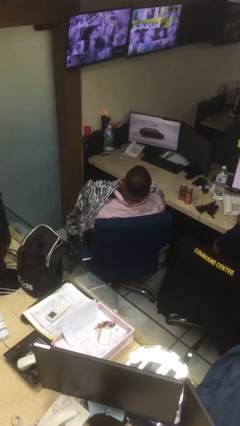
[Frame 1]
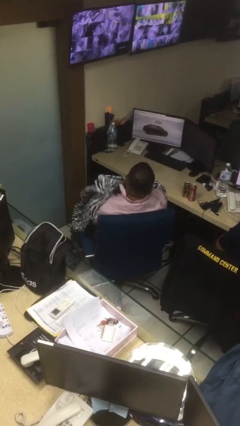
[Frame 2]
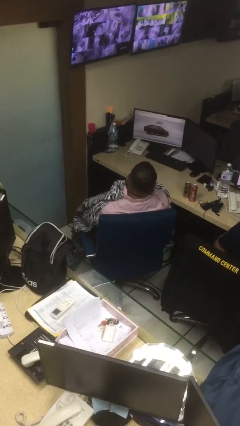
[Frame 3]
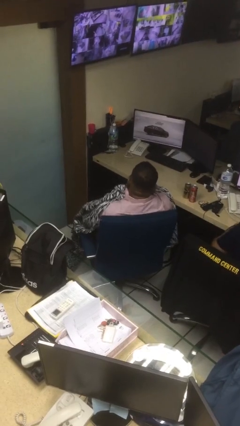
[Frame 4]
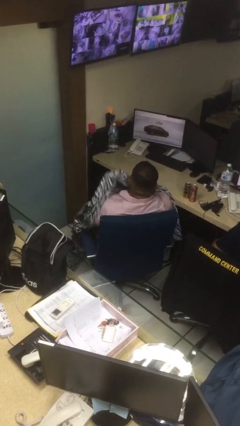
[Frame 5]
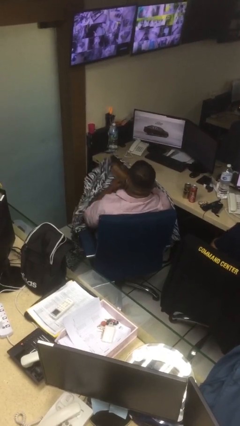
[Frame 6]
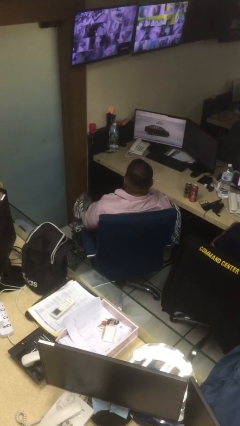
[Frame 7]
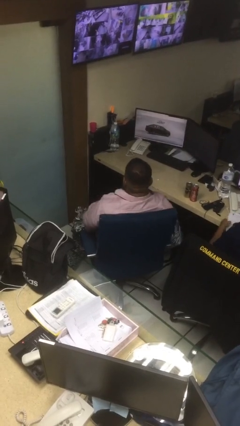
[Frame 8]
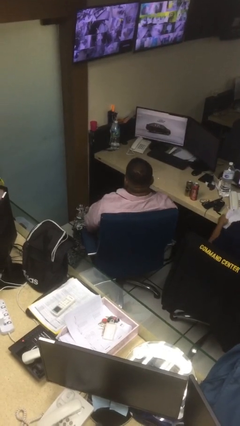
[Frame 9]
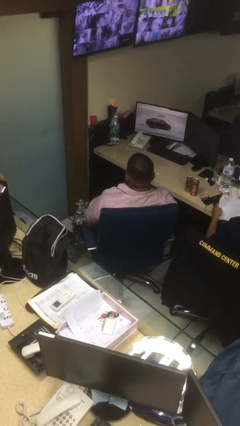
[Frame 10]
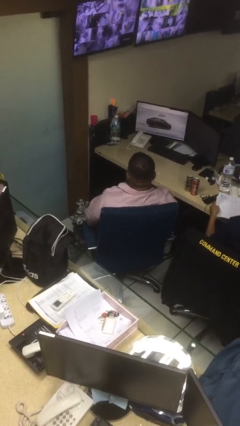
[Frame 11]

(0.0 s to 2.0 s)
person uncovers with blanket

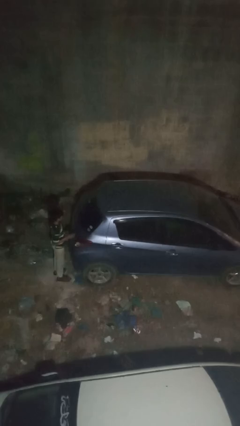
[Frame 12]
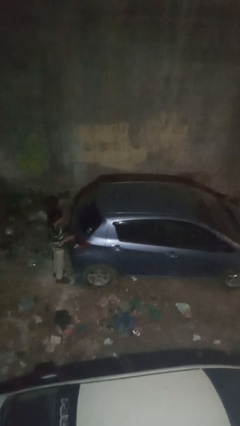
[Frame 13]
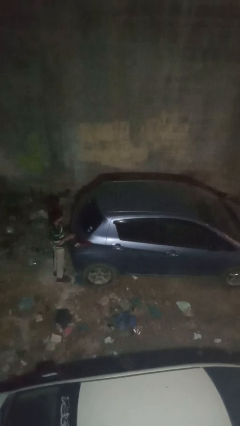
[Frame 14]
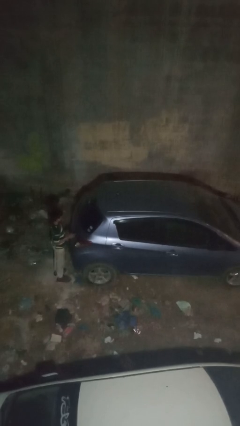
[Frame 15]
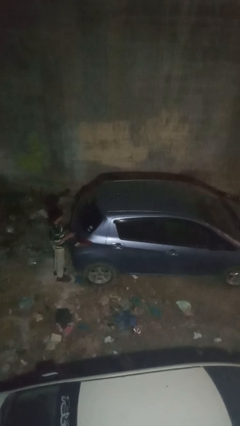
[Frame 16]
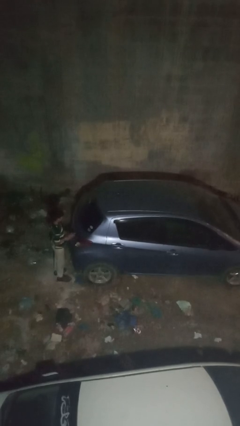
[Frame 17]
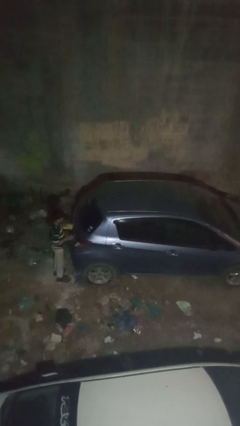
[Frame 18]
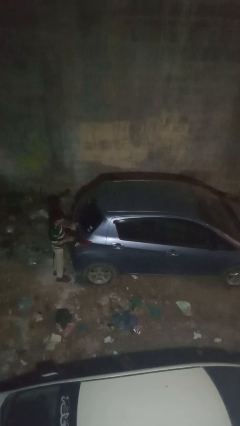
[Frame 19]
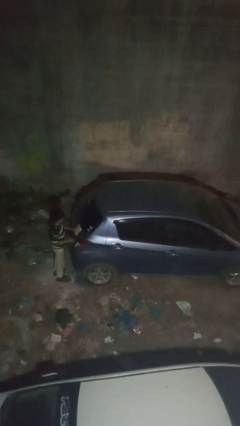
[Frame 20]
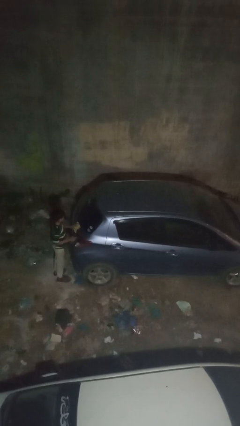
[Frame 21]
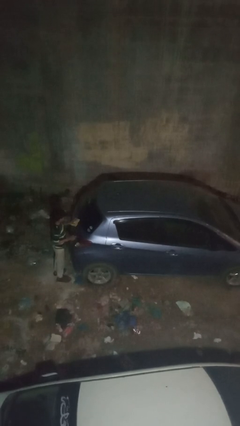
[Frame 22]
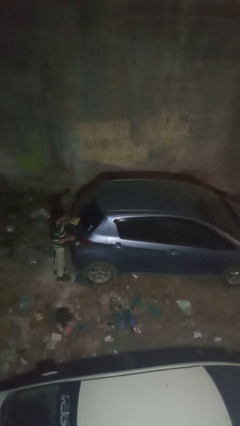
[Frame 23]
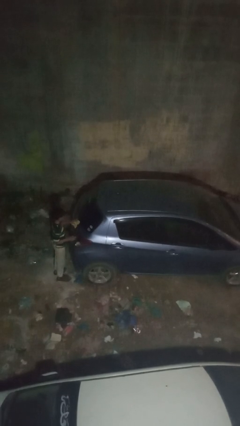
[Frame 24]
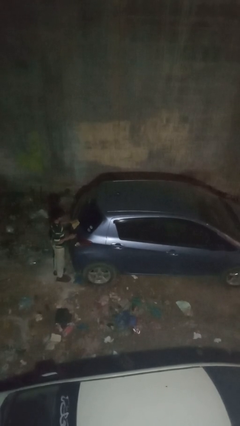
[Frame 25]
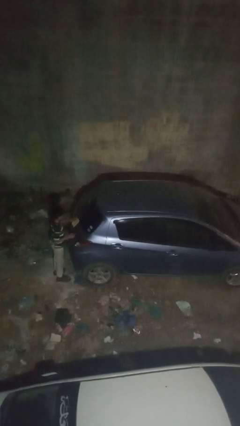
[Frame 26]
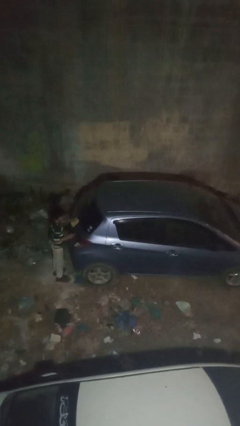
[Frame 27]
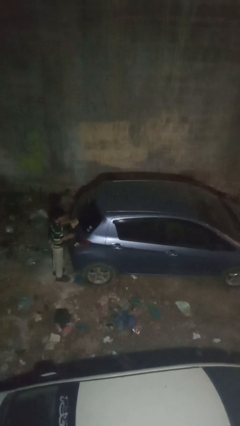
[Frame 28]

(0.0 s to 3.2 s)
person polishes car with rag

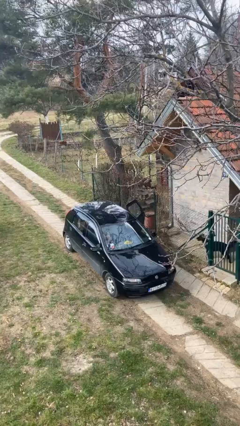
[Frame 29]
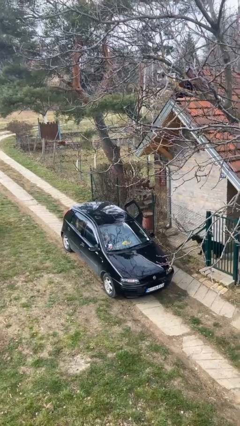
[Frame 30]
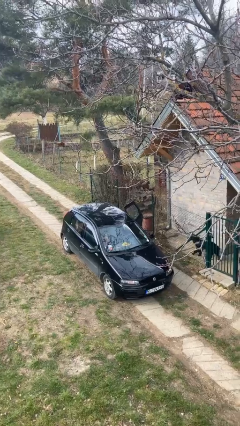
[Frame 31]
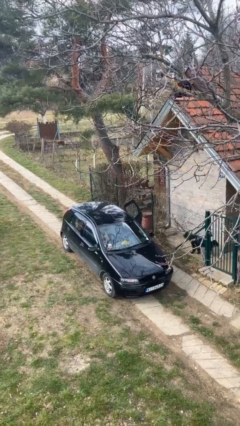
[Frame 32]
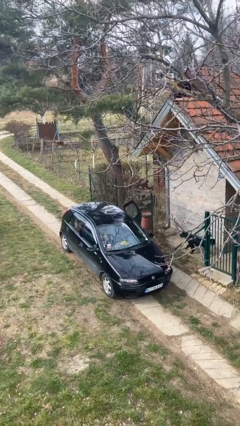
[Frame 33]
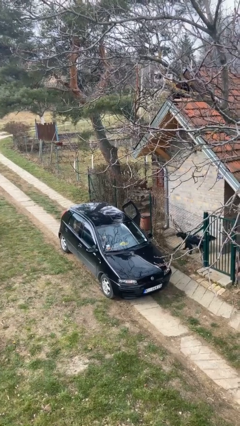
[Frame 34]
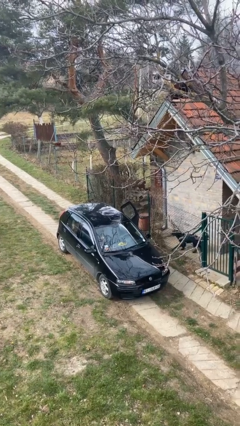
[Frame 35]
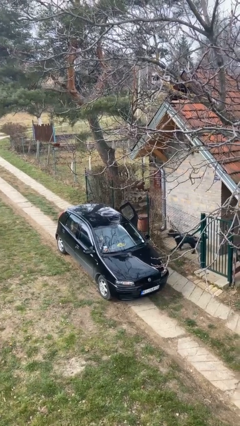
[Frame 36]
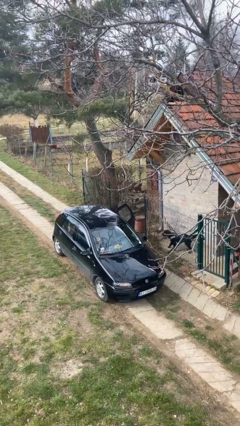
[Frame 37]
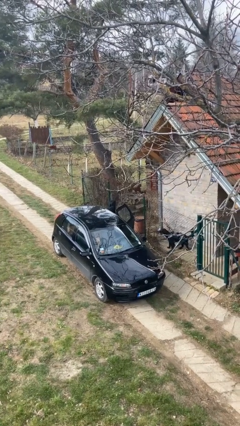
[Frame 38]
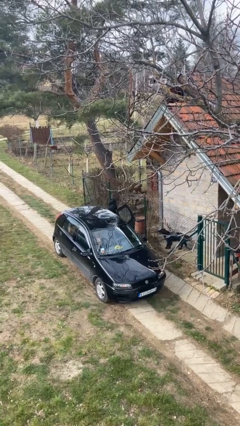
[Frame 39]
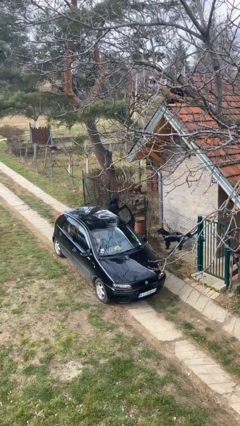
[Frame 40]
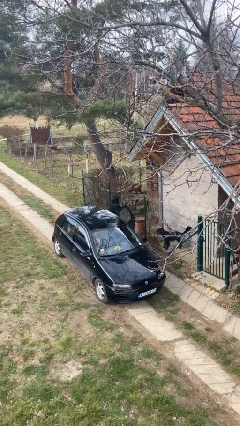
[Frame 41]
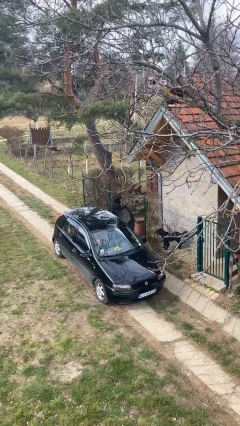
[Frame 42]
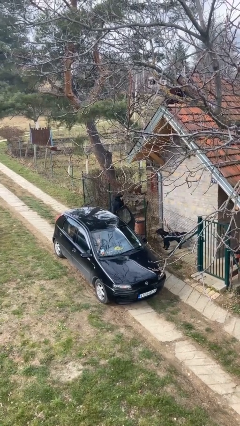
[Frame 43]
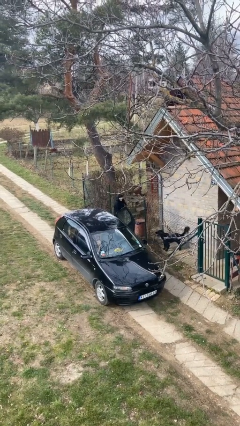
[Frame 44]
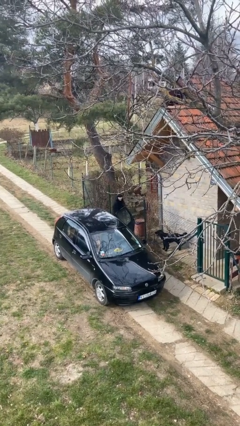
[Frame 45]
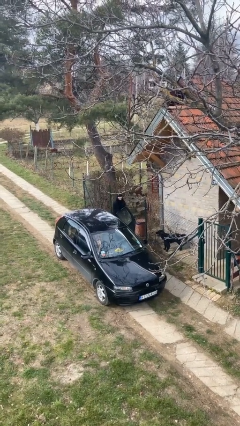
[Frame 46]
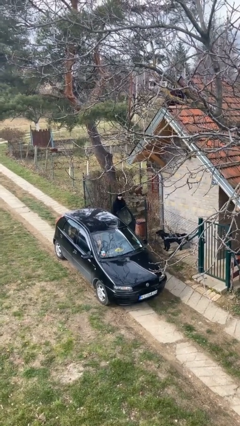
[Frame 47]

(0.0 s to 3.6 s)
person exits car

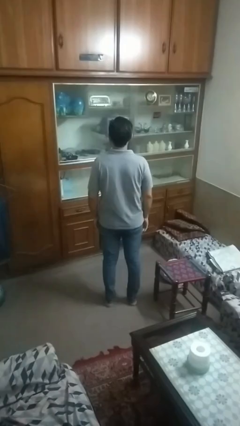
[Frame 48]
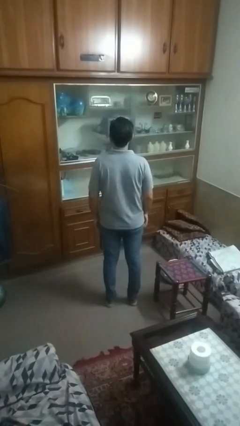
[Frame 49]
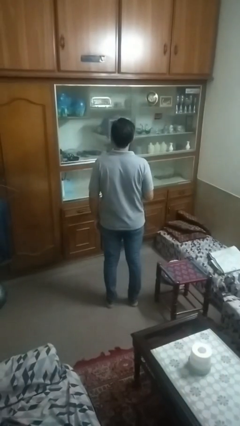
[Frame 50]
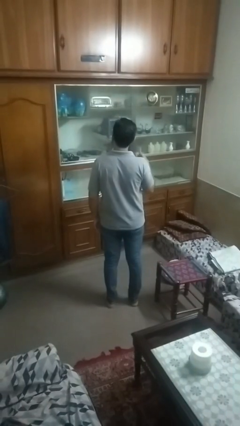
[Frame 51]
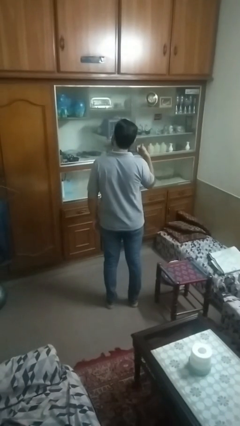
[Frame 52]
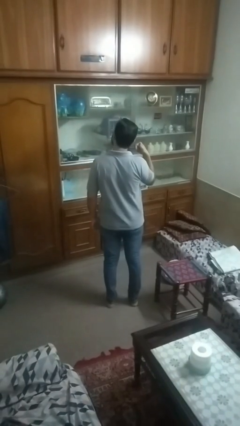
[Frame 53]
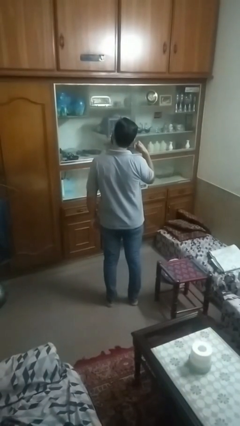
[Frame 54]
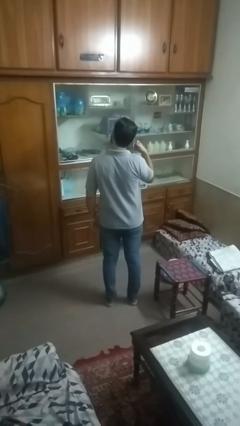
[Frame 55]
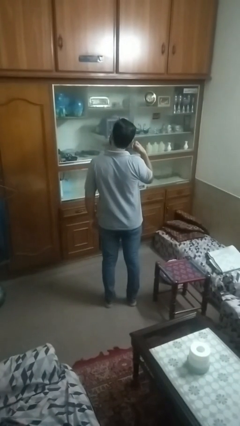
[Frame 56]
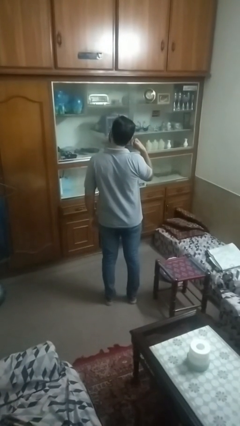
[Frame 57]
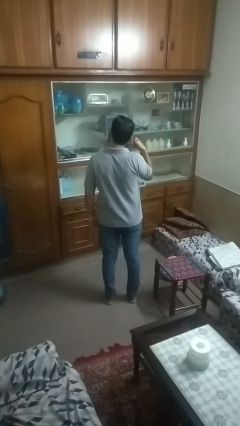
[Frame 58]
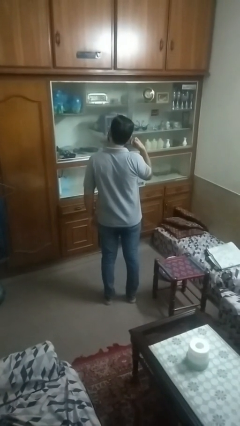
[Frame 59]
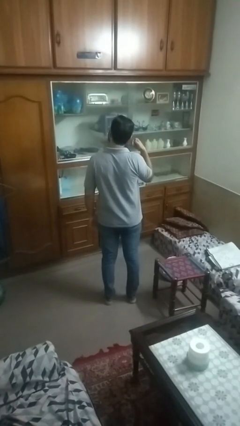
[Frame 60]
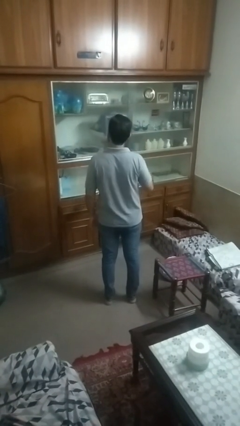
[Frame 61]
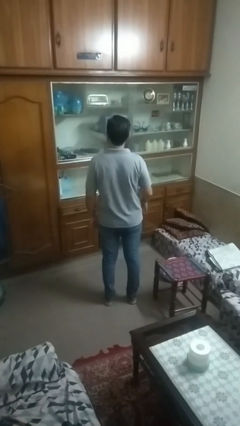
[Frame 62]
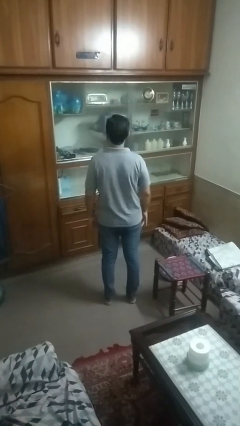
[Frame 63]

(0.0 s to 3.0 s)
person gestures call me

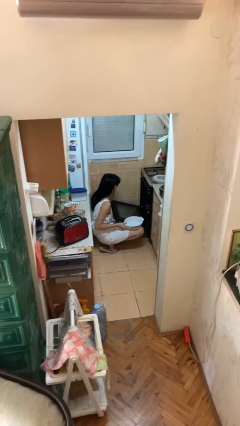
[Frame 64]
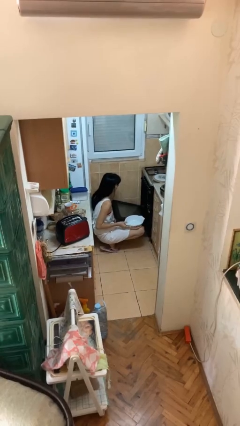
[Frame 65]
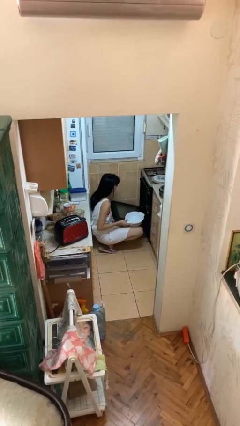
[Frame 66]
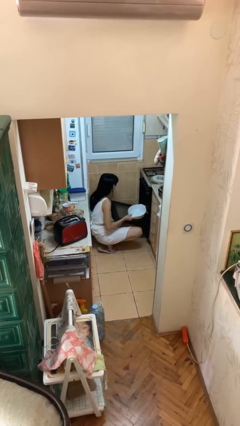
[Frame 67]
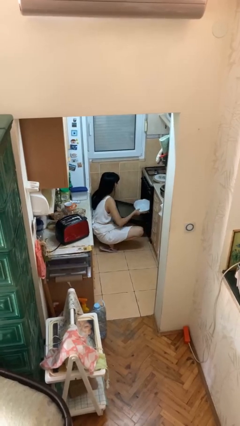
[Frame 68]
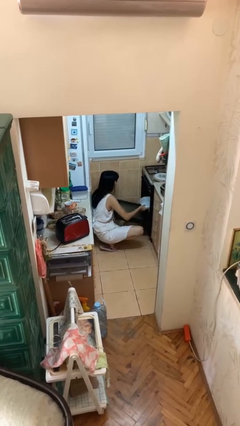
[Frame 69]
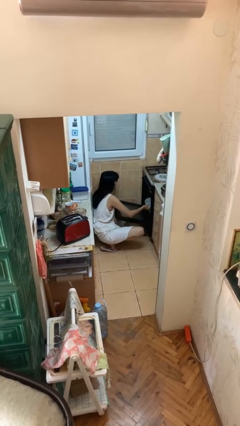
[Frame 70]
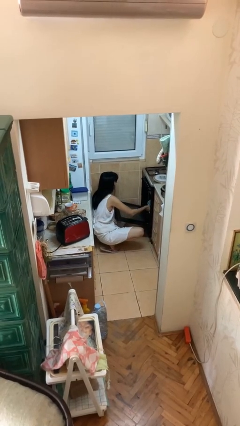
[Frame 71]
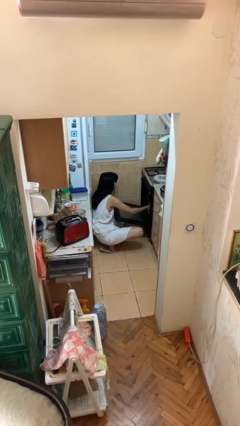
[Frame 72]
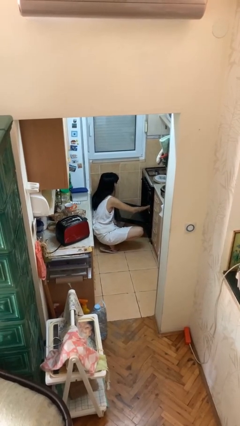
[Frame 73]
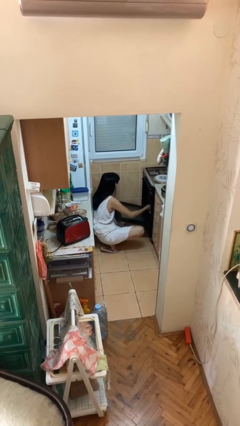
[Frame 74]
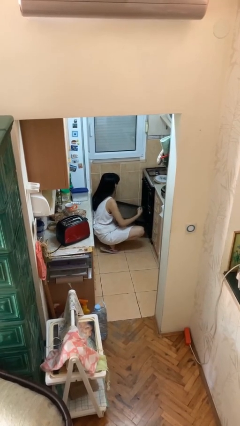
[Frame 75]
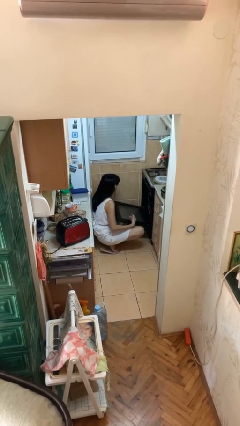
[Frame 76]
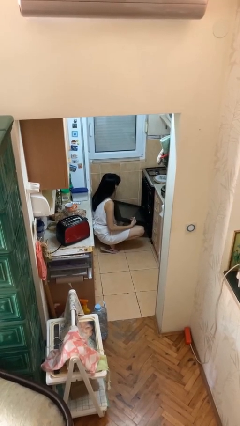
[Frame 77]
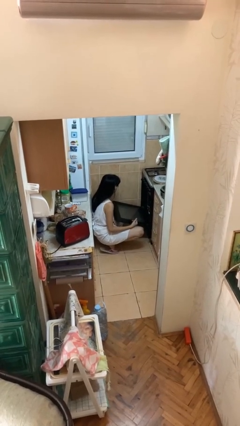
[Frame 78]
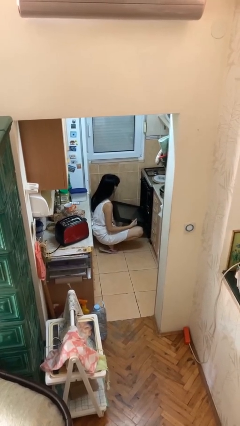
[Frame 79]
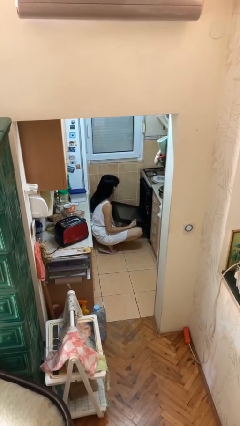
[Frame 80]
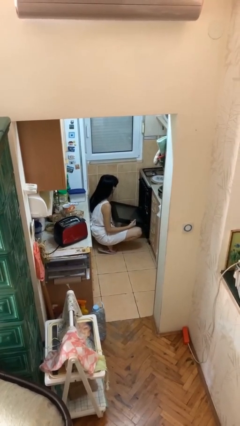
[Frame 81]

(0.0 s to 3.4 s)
person puts object into oven

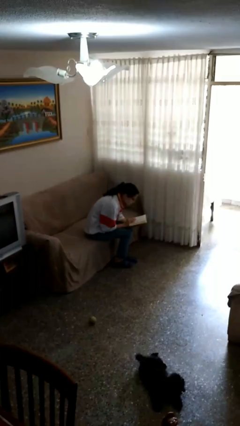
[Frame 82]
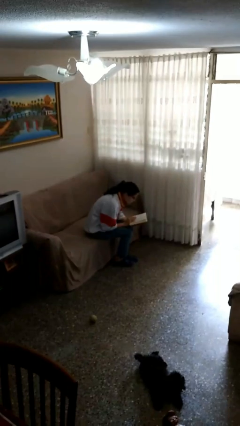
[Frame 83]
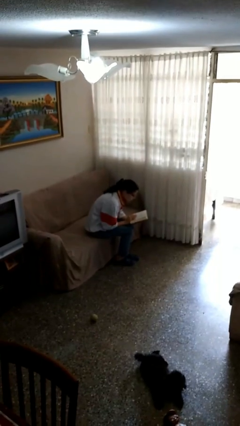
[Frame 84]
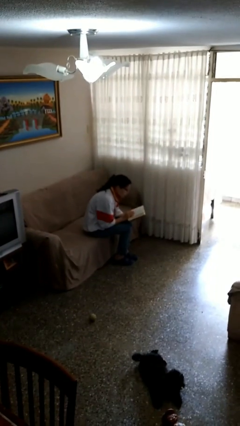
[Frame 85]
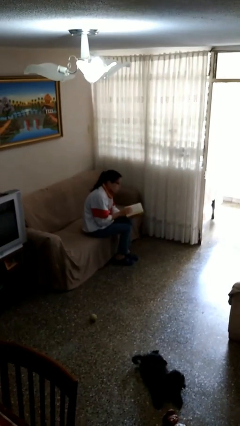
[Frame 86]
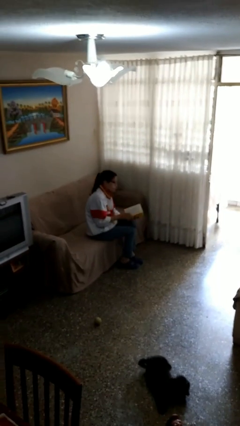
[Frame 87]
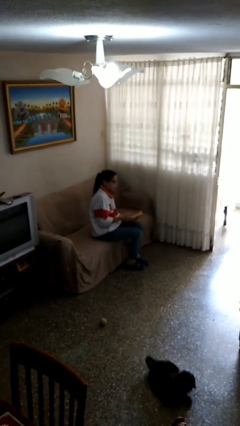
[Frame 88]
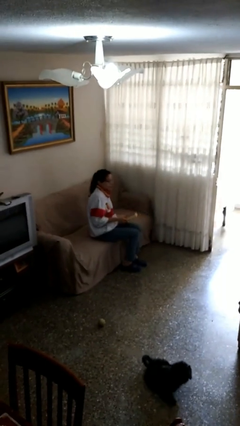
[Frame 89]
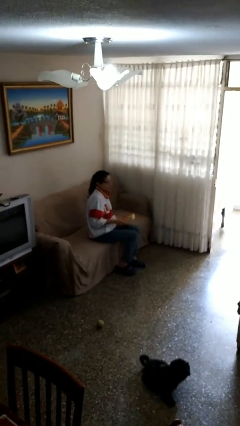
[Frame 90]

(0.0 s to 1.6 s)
person reads document

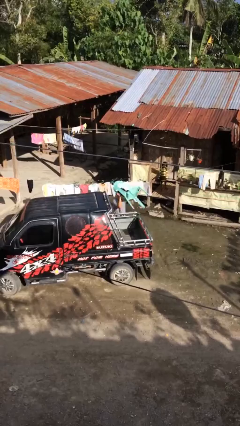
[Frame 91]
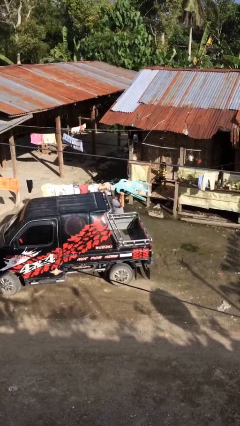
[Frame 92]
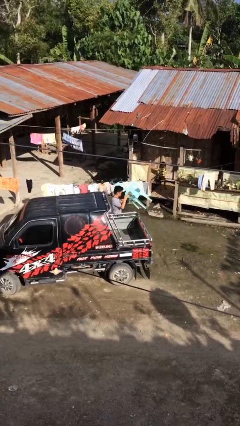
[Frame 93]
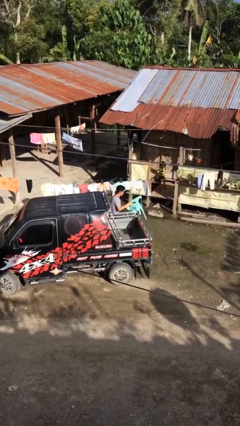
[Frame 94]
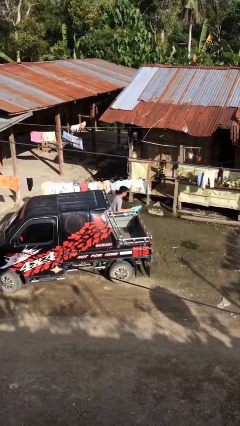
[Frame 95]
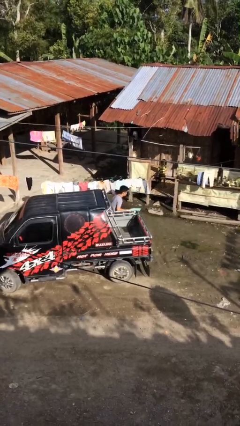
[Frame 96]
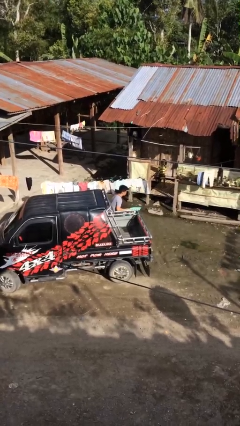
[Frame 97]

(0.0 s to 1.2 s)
person unloads car
